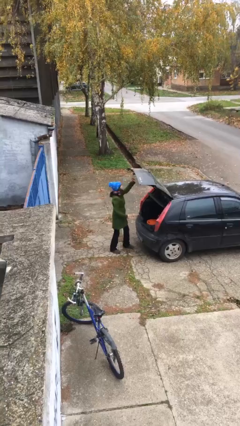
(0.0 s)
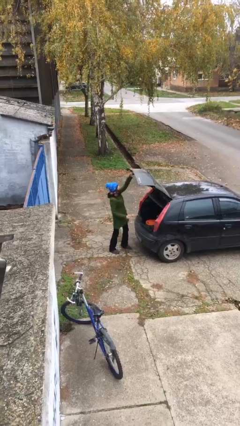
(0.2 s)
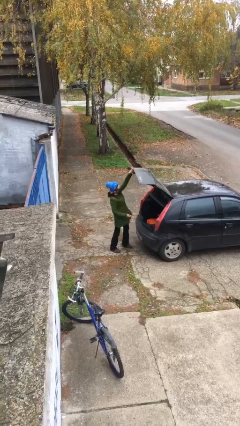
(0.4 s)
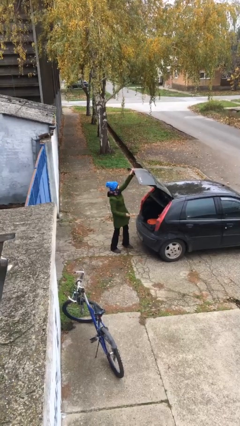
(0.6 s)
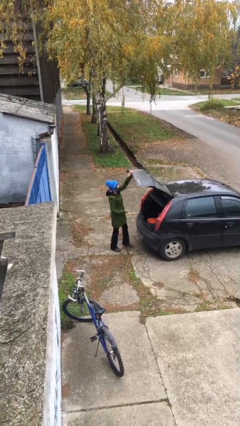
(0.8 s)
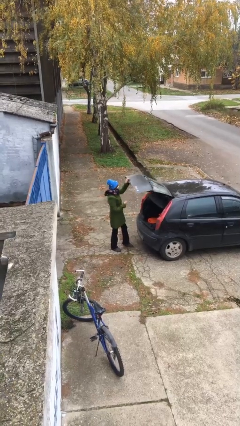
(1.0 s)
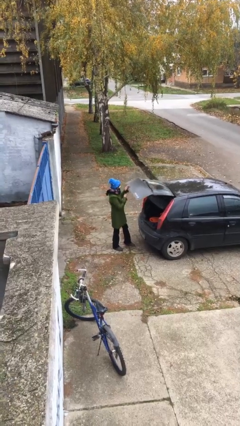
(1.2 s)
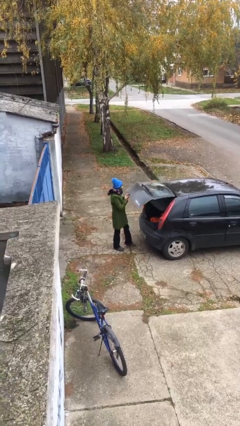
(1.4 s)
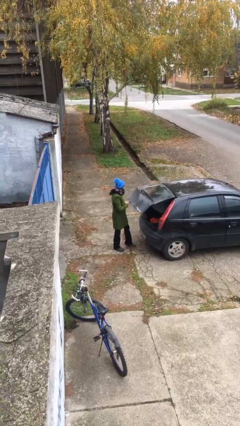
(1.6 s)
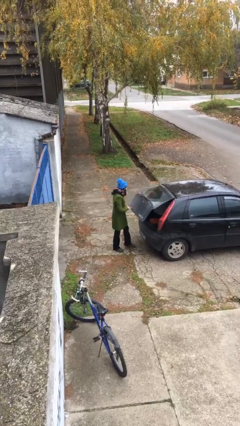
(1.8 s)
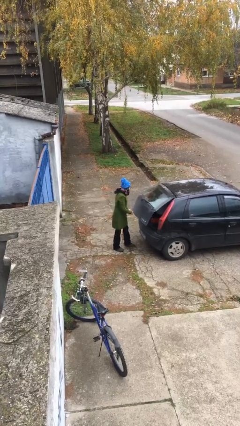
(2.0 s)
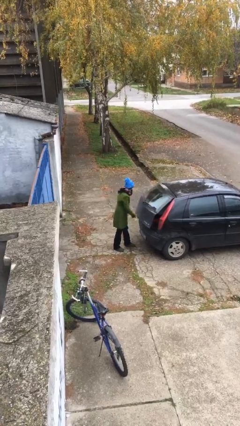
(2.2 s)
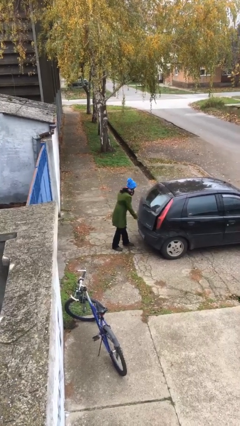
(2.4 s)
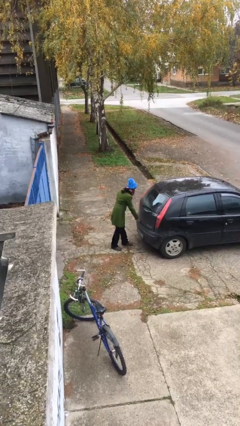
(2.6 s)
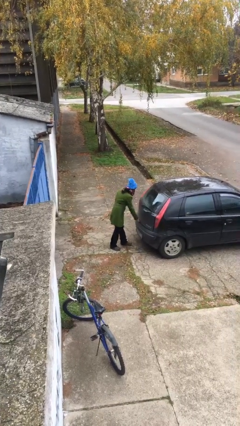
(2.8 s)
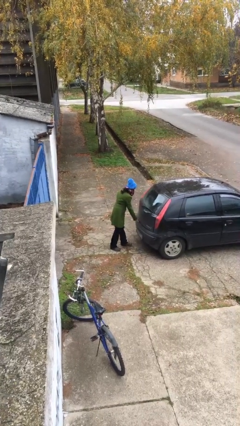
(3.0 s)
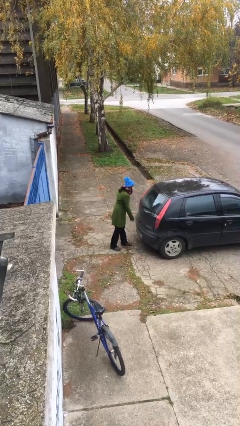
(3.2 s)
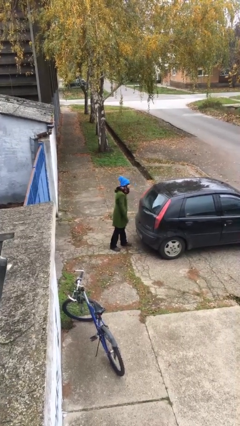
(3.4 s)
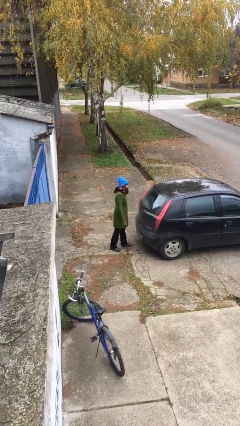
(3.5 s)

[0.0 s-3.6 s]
person closes car trunk

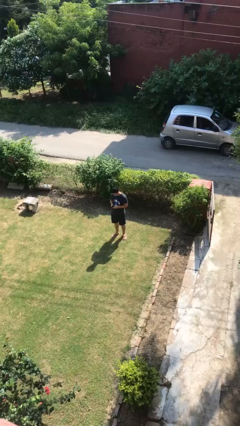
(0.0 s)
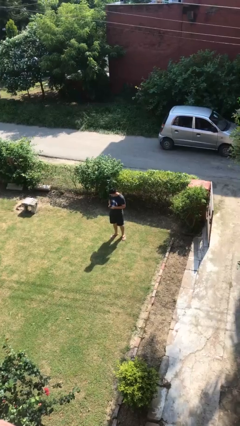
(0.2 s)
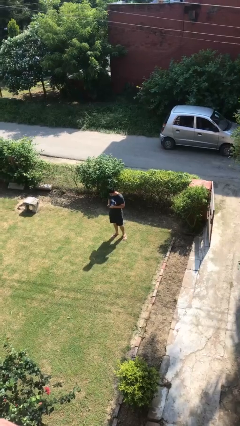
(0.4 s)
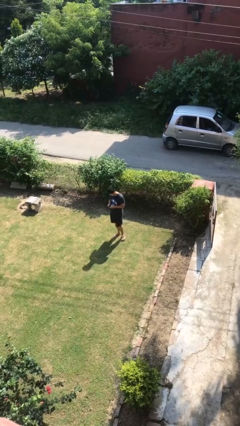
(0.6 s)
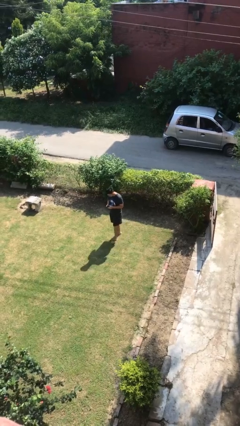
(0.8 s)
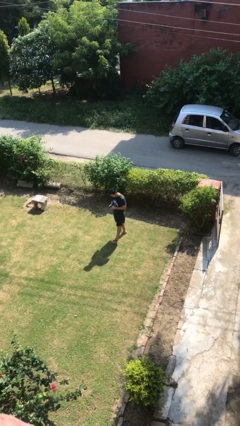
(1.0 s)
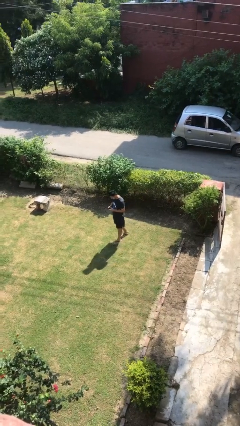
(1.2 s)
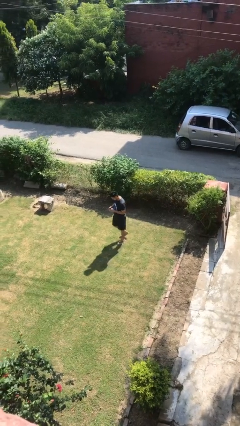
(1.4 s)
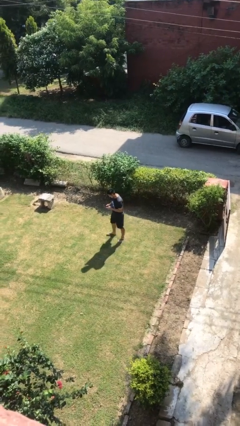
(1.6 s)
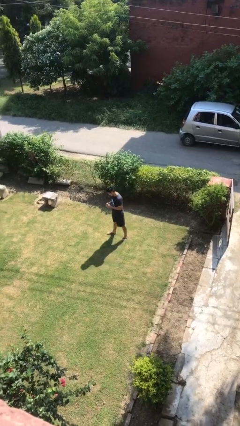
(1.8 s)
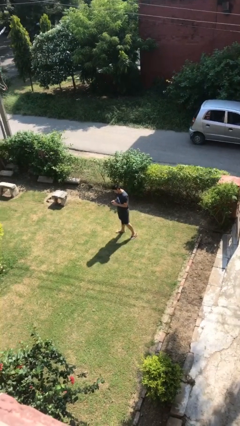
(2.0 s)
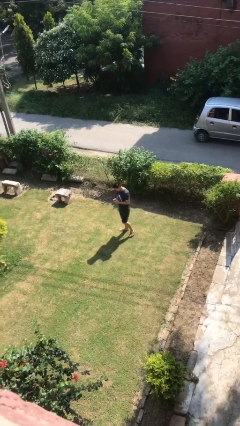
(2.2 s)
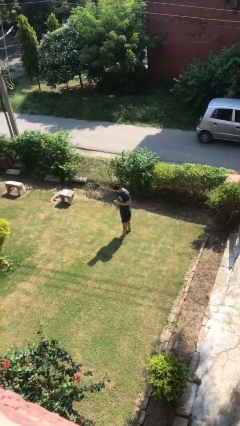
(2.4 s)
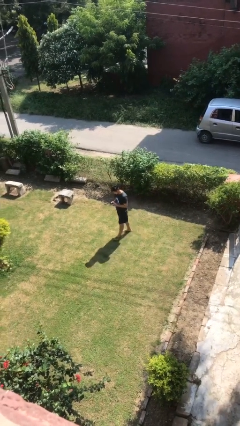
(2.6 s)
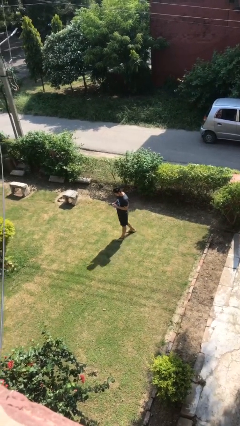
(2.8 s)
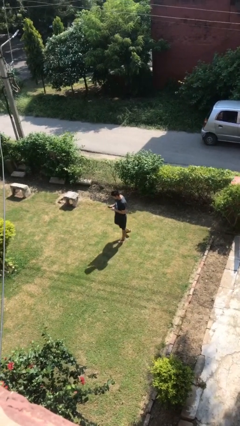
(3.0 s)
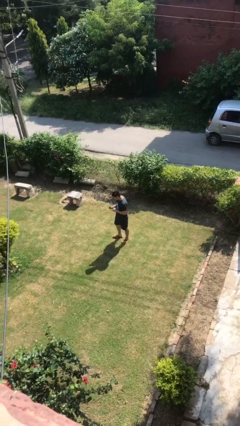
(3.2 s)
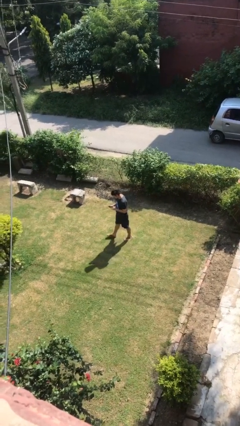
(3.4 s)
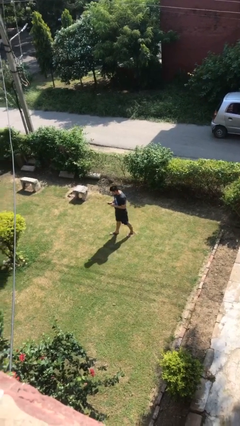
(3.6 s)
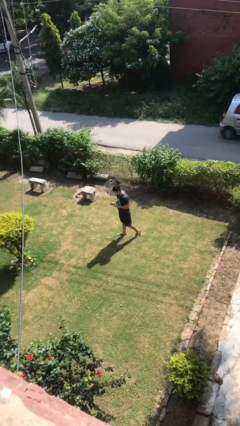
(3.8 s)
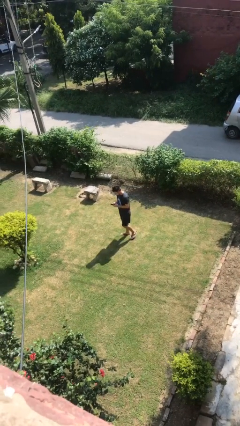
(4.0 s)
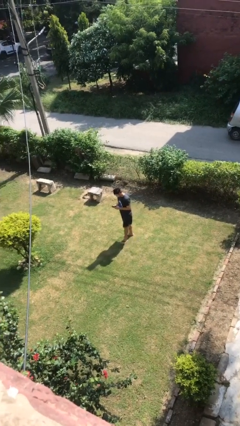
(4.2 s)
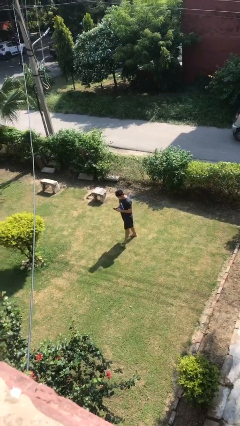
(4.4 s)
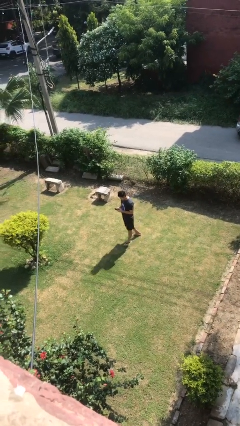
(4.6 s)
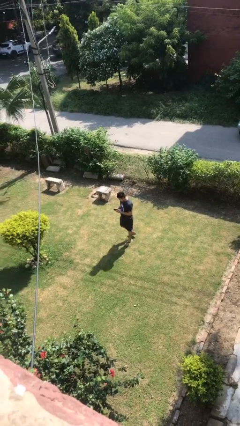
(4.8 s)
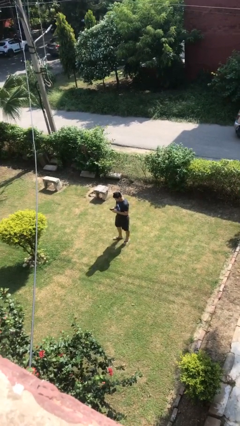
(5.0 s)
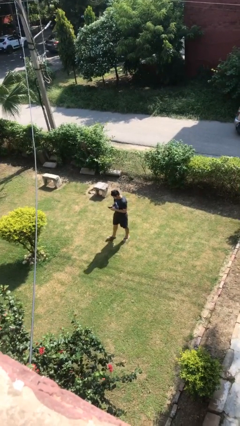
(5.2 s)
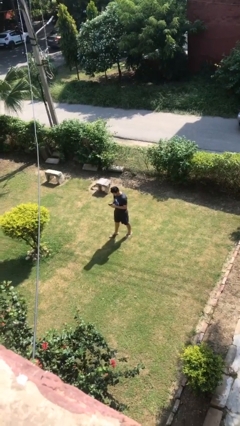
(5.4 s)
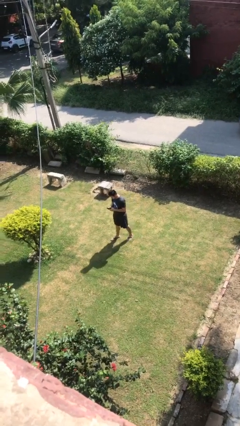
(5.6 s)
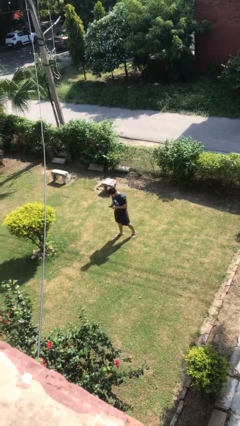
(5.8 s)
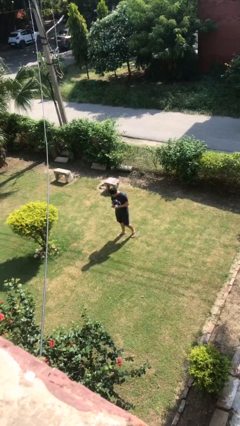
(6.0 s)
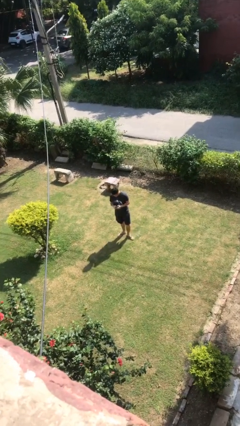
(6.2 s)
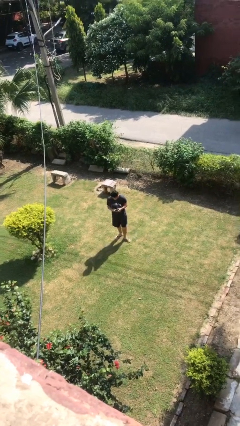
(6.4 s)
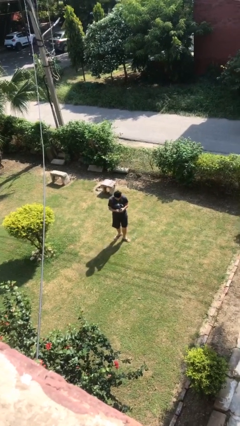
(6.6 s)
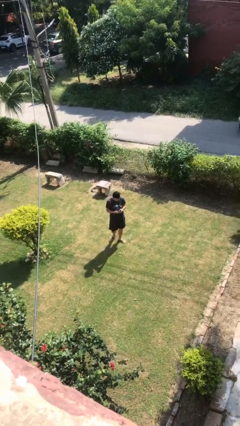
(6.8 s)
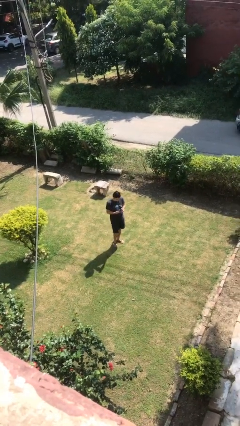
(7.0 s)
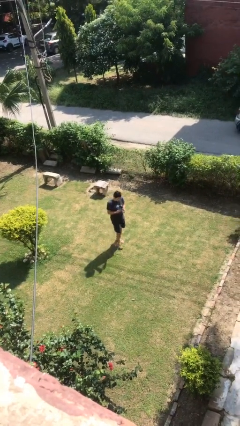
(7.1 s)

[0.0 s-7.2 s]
person texts on phone

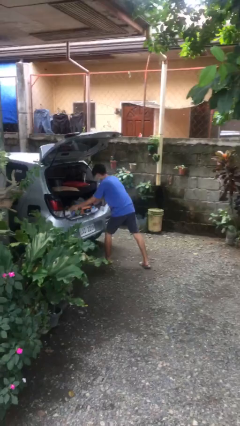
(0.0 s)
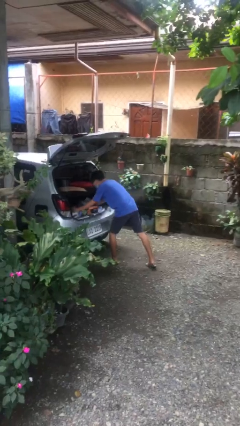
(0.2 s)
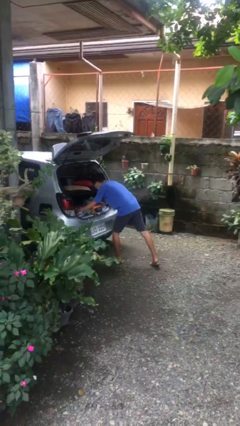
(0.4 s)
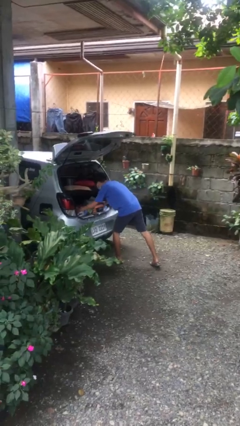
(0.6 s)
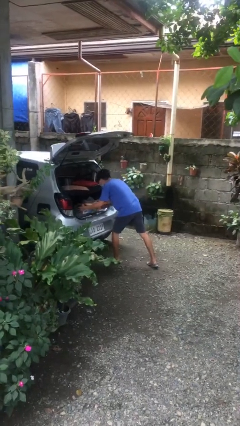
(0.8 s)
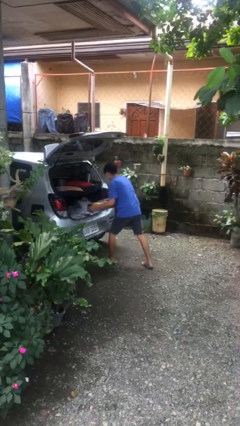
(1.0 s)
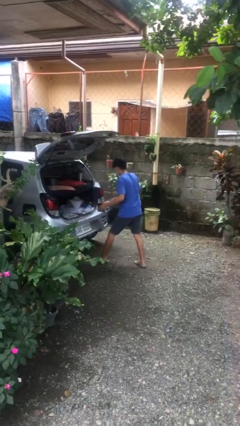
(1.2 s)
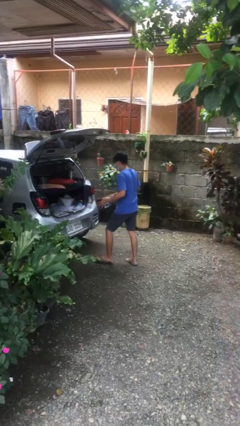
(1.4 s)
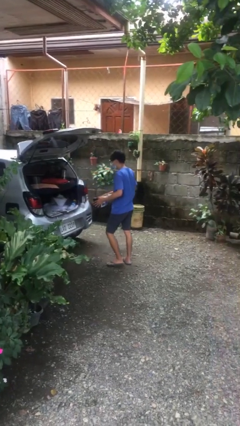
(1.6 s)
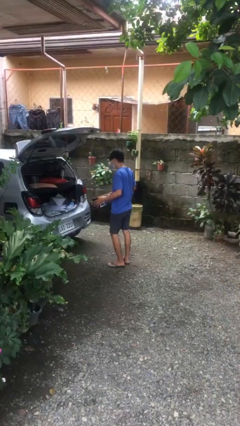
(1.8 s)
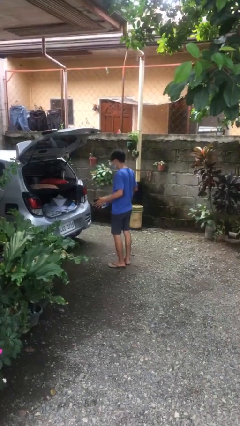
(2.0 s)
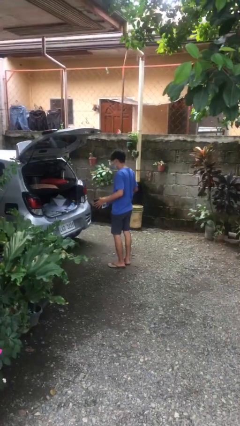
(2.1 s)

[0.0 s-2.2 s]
person unloads car

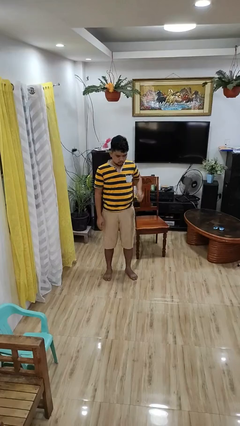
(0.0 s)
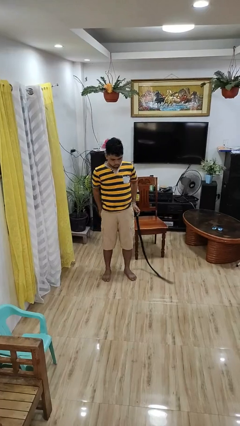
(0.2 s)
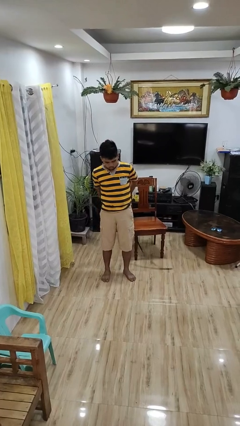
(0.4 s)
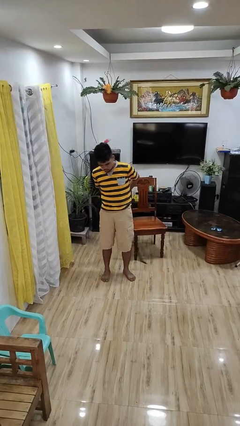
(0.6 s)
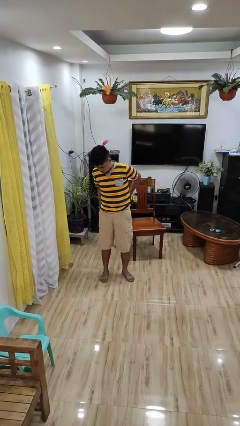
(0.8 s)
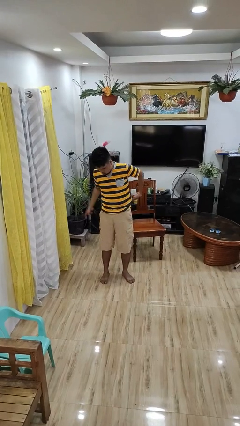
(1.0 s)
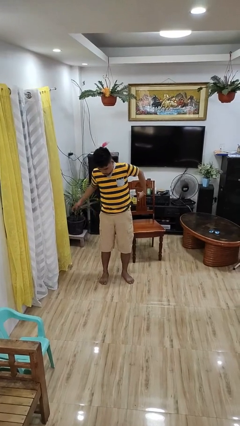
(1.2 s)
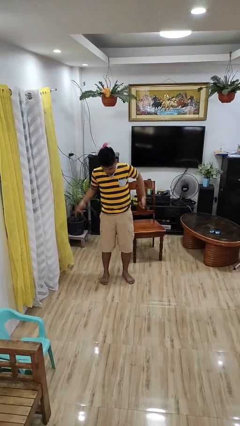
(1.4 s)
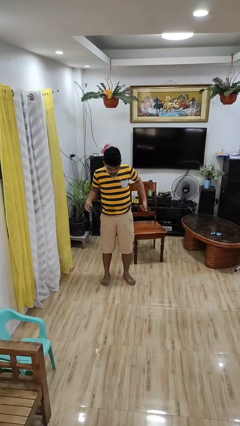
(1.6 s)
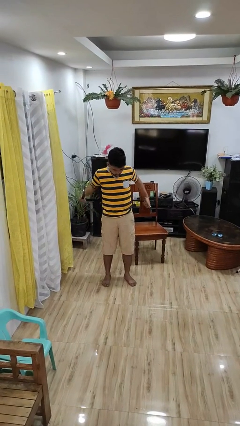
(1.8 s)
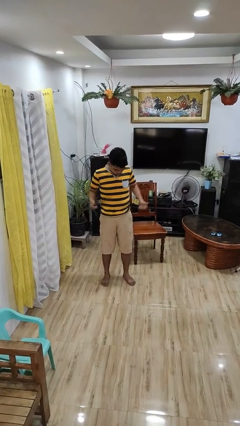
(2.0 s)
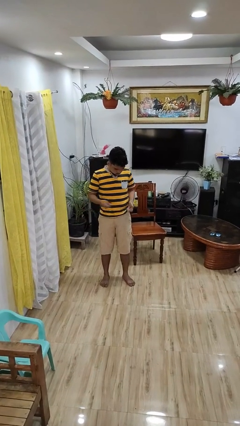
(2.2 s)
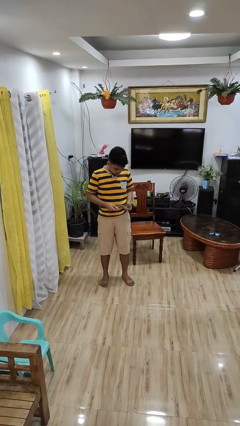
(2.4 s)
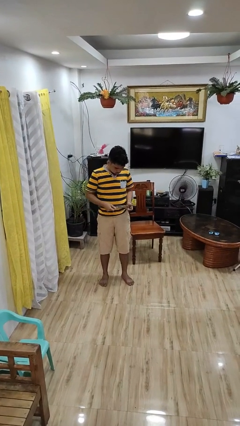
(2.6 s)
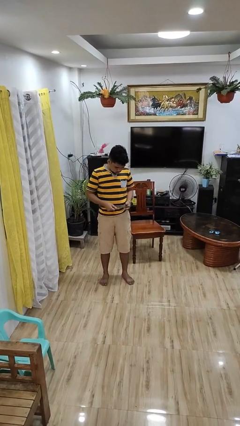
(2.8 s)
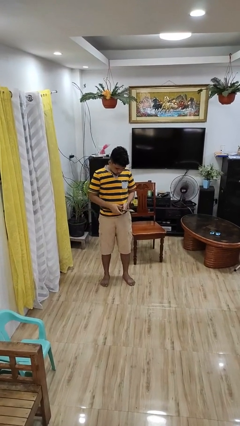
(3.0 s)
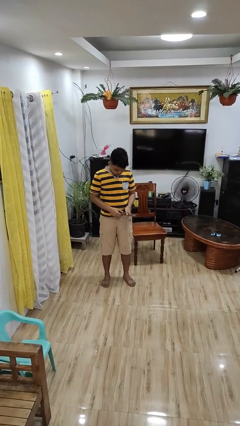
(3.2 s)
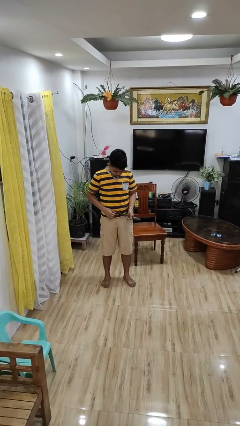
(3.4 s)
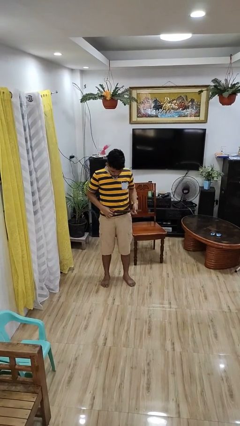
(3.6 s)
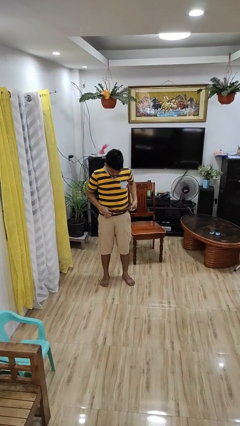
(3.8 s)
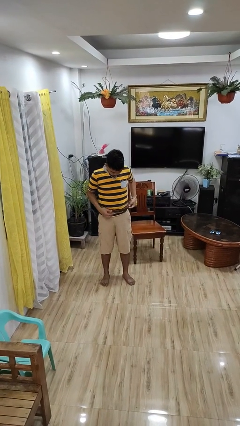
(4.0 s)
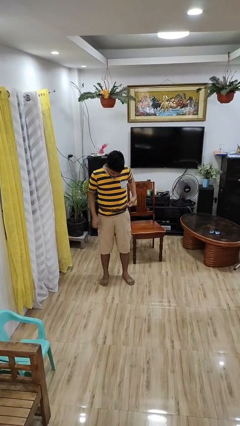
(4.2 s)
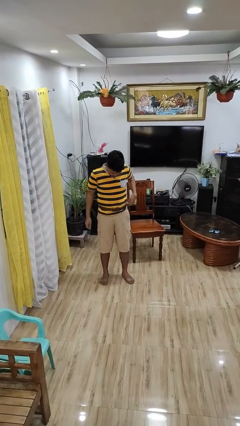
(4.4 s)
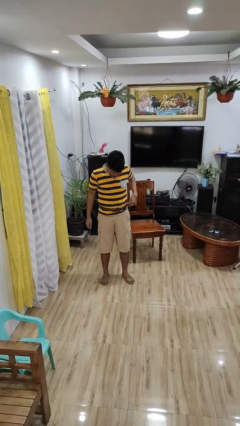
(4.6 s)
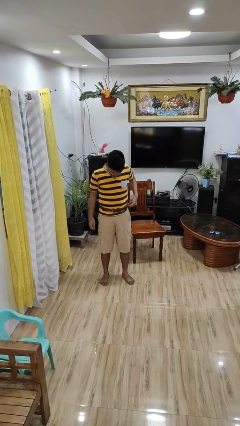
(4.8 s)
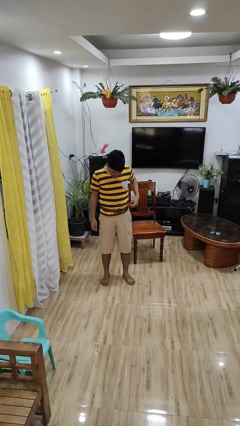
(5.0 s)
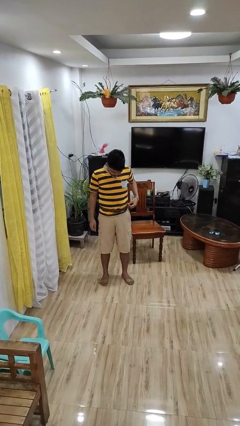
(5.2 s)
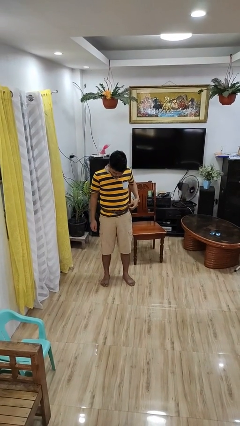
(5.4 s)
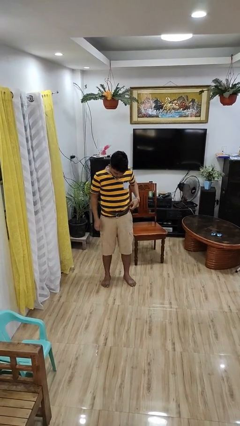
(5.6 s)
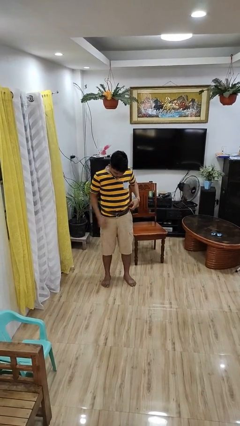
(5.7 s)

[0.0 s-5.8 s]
person puts on belt
